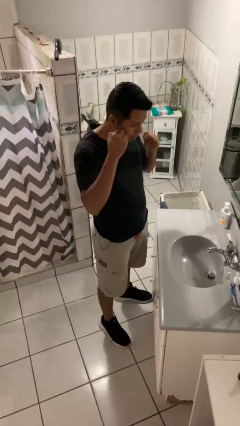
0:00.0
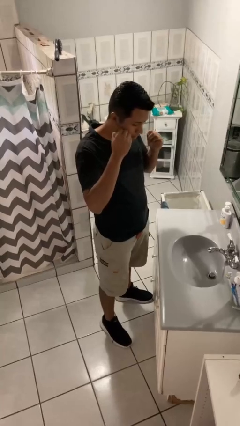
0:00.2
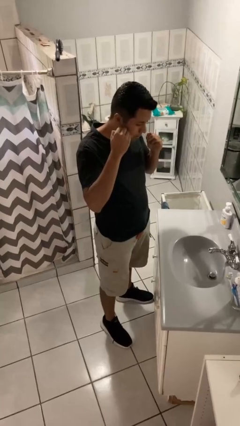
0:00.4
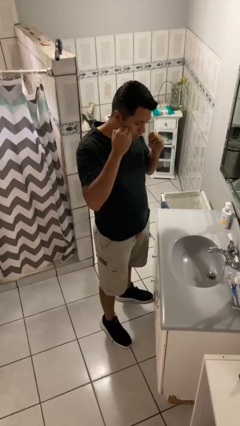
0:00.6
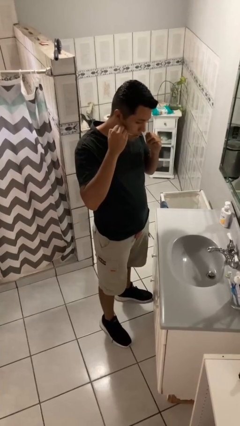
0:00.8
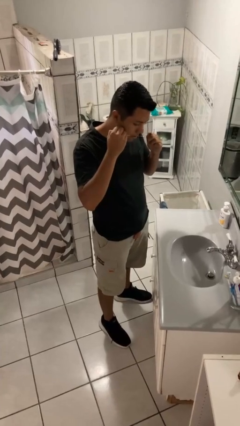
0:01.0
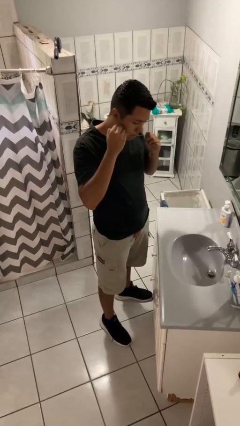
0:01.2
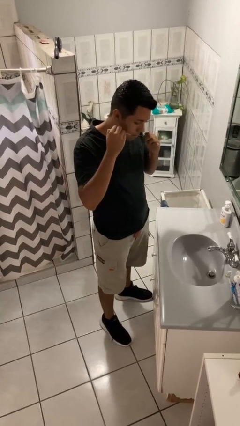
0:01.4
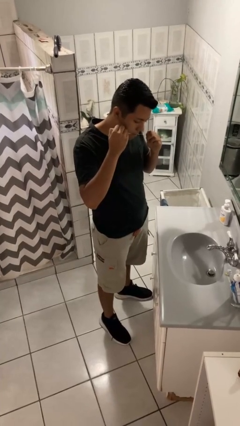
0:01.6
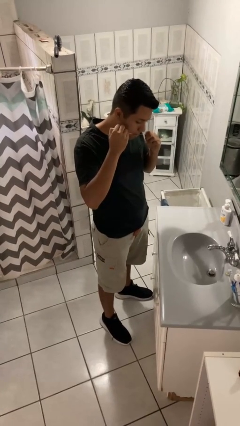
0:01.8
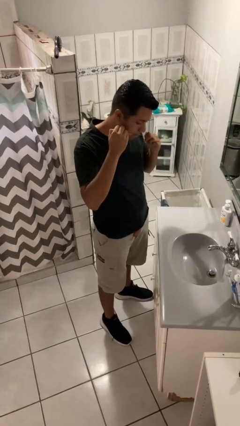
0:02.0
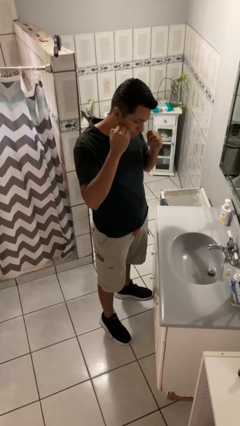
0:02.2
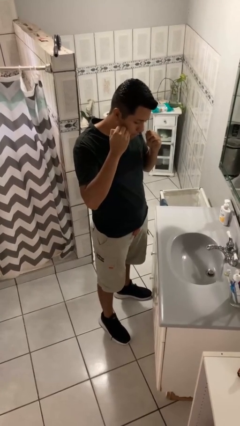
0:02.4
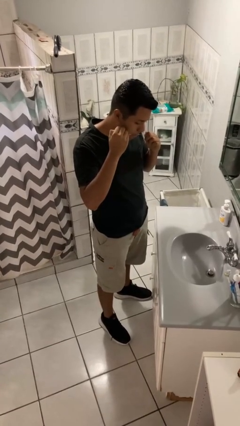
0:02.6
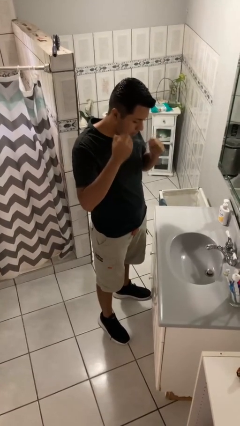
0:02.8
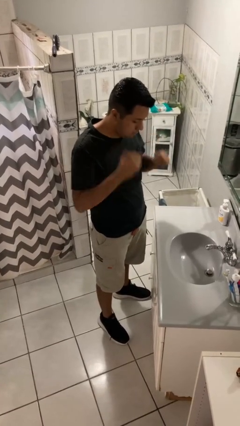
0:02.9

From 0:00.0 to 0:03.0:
person flosses

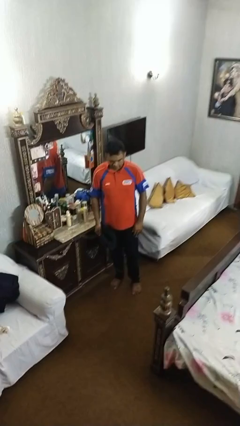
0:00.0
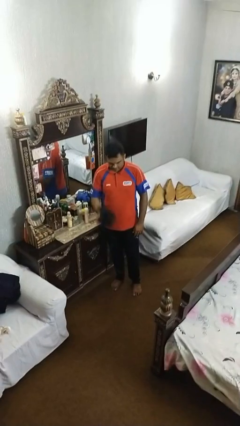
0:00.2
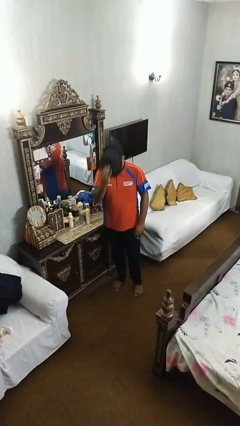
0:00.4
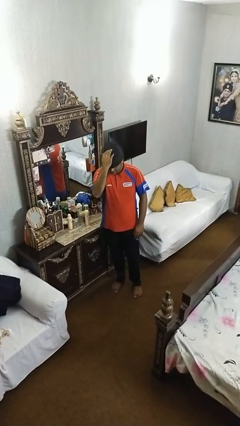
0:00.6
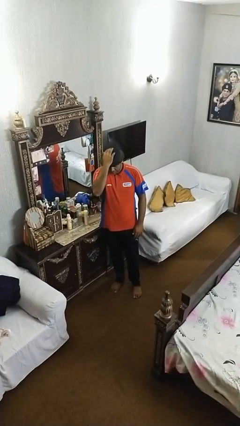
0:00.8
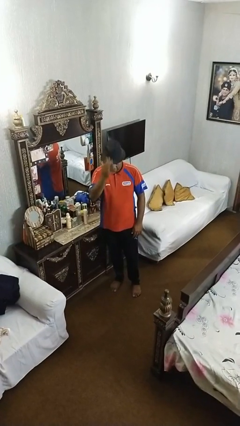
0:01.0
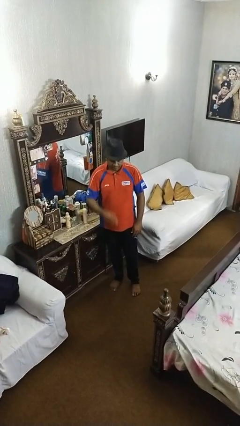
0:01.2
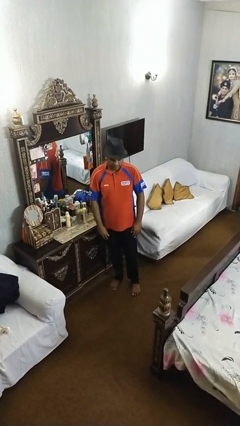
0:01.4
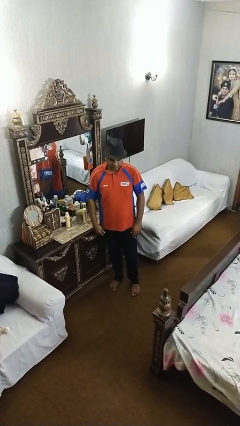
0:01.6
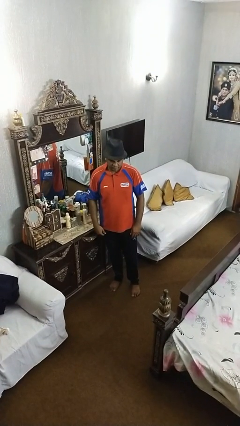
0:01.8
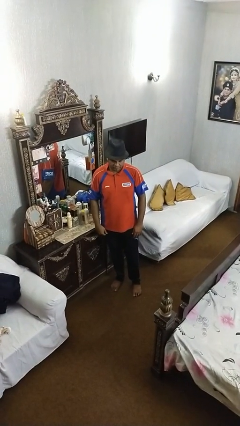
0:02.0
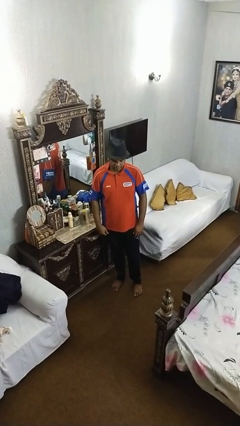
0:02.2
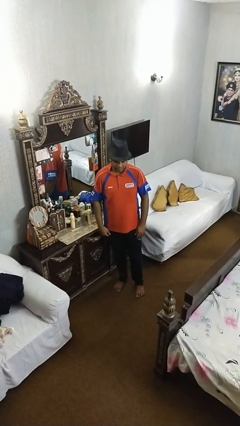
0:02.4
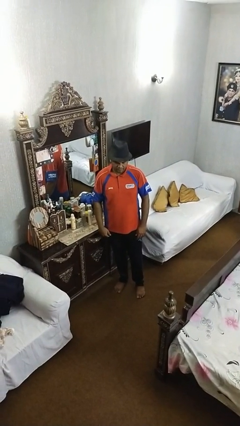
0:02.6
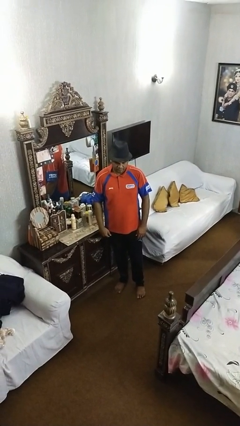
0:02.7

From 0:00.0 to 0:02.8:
person puts on hat

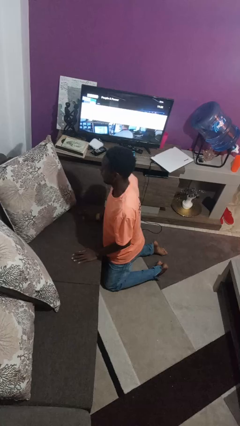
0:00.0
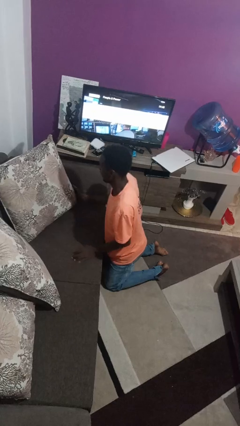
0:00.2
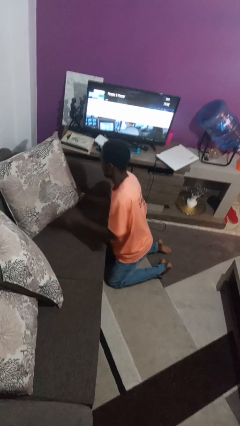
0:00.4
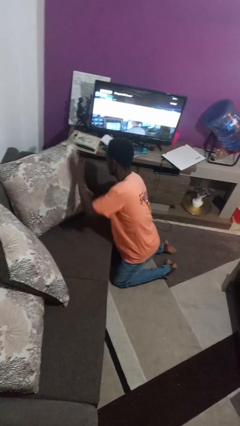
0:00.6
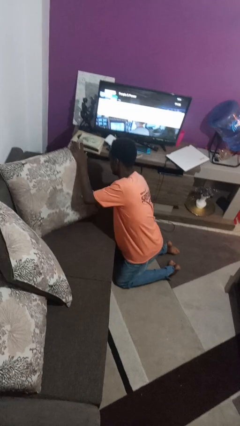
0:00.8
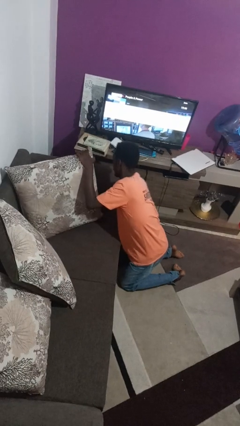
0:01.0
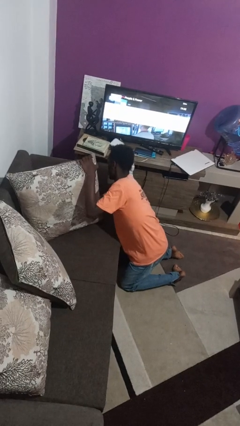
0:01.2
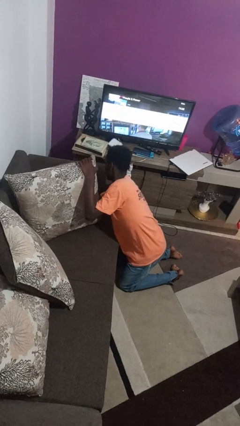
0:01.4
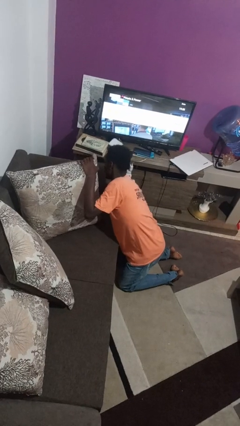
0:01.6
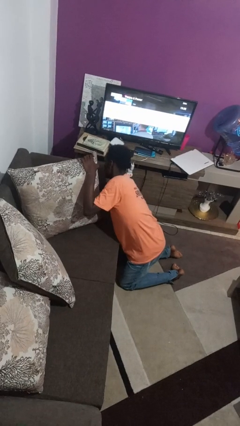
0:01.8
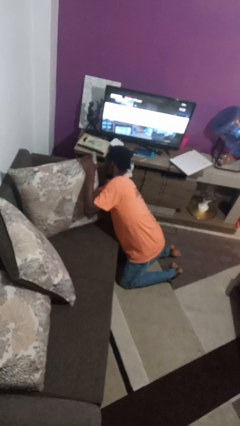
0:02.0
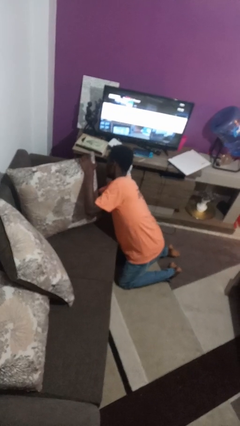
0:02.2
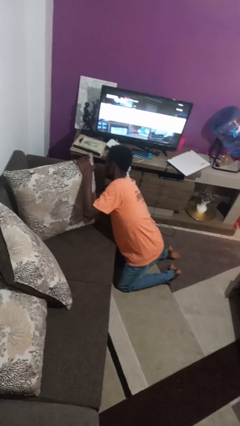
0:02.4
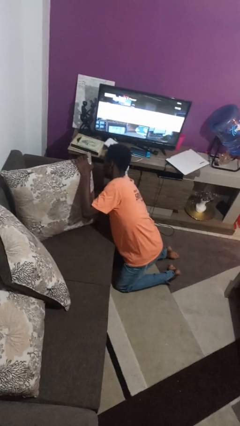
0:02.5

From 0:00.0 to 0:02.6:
person searches in couch

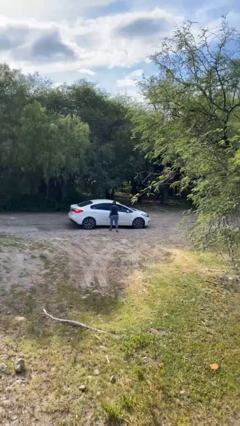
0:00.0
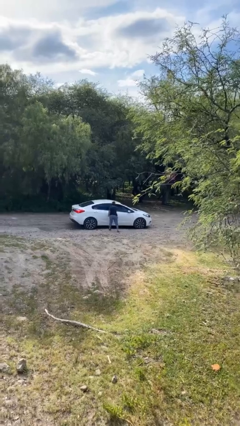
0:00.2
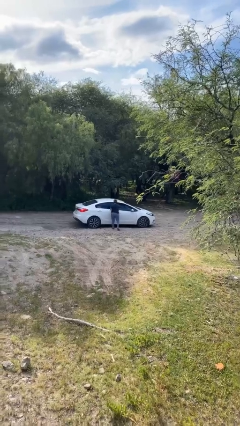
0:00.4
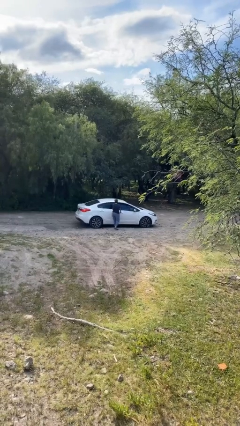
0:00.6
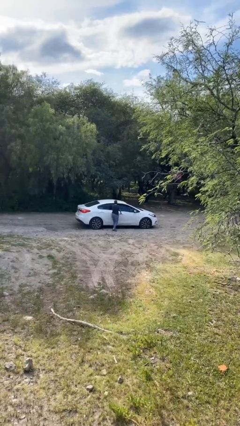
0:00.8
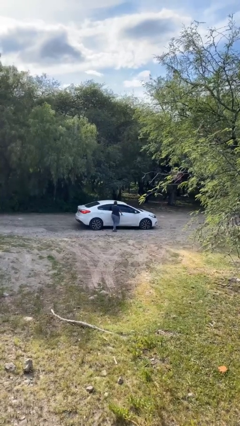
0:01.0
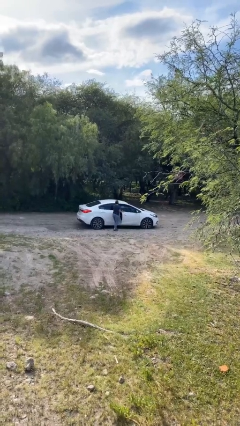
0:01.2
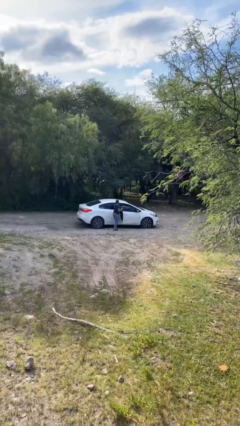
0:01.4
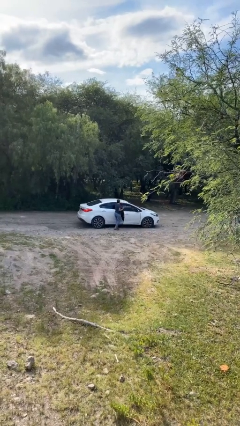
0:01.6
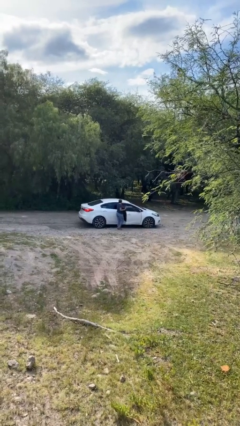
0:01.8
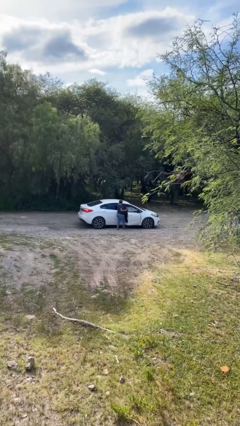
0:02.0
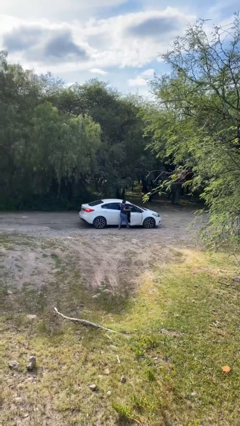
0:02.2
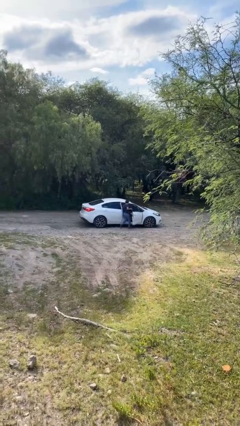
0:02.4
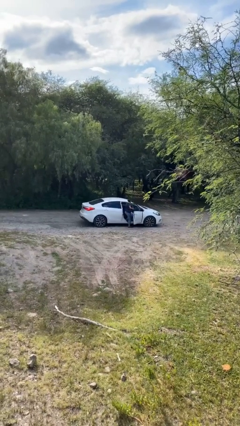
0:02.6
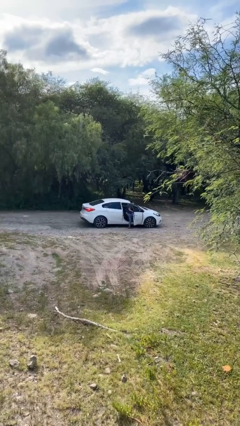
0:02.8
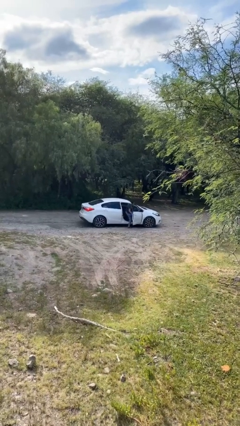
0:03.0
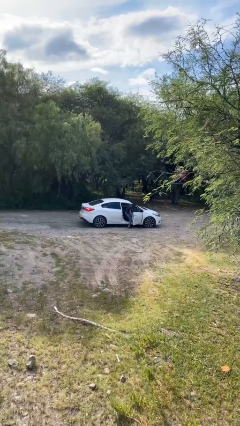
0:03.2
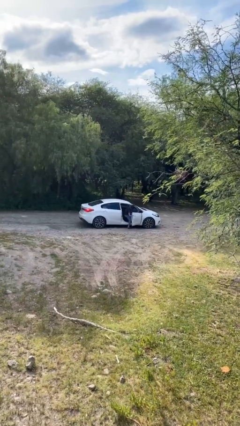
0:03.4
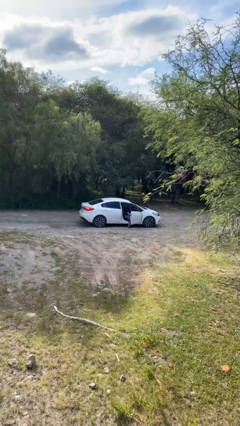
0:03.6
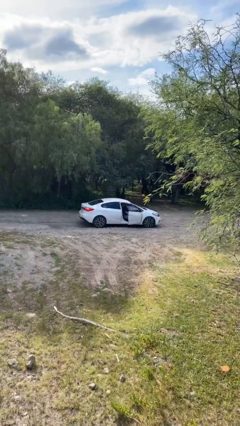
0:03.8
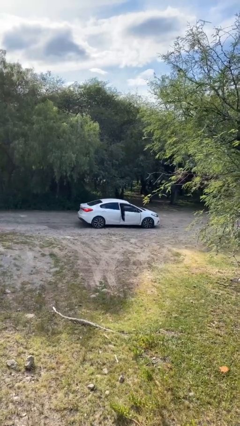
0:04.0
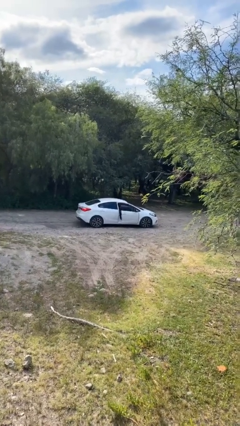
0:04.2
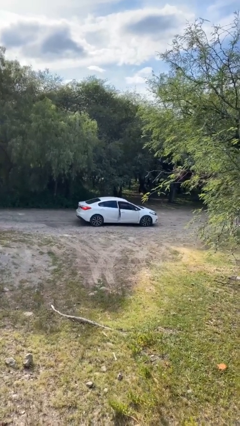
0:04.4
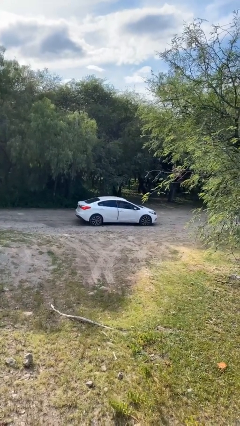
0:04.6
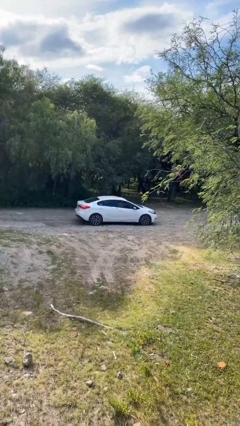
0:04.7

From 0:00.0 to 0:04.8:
car picks up person

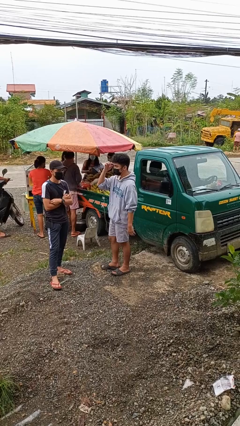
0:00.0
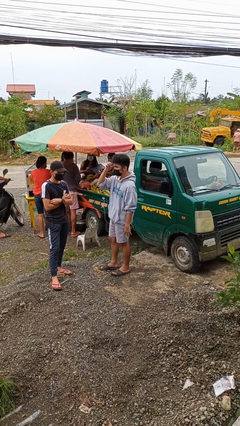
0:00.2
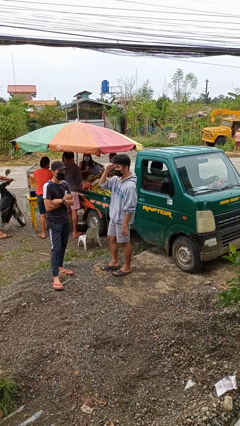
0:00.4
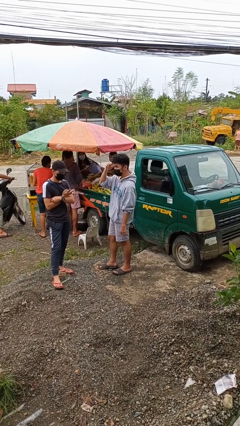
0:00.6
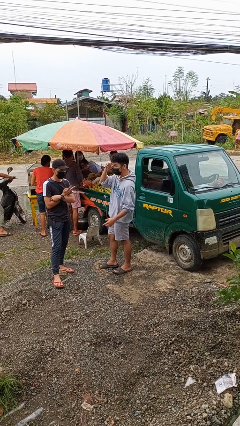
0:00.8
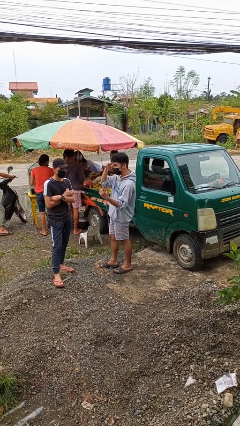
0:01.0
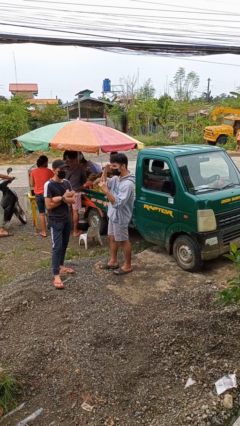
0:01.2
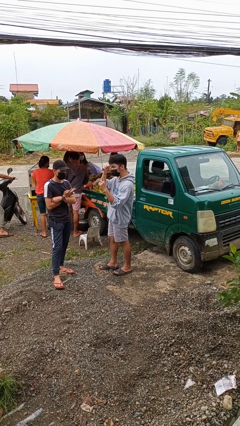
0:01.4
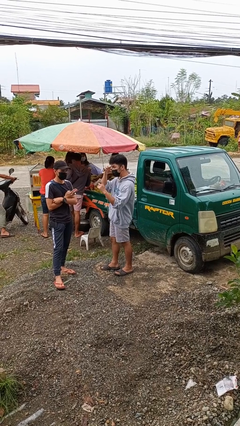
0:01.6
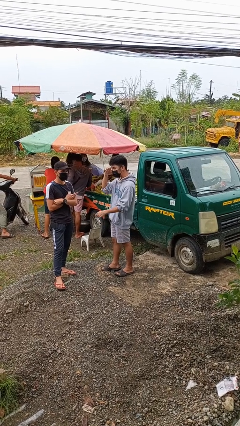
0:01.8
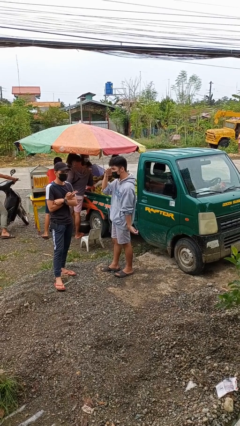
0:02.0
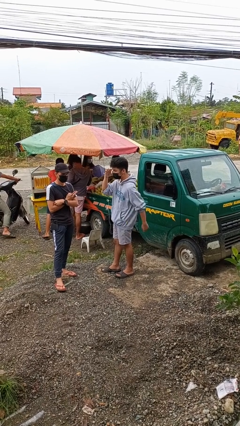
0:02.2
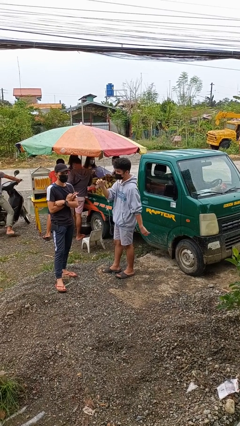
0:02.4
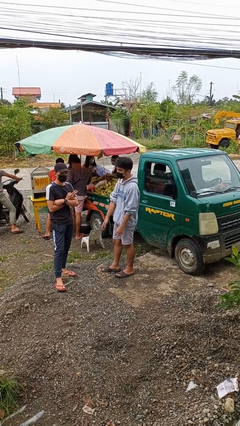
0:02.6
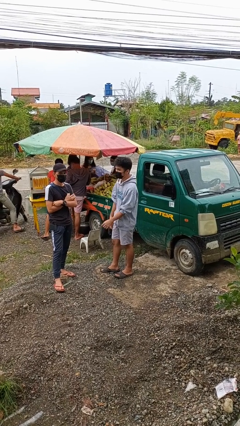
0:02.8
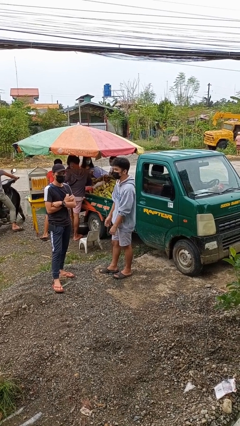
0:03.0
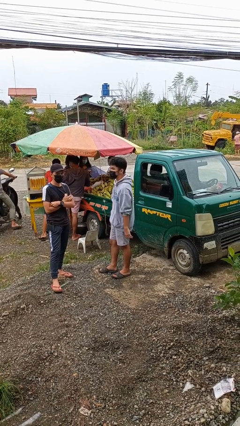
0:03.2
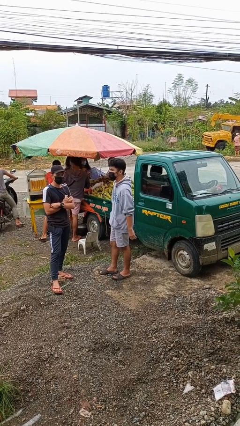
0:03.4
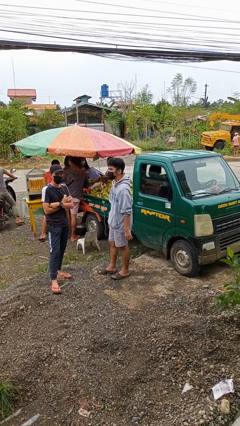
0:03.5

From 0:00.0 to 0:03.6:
person talks to person

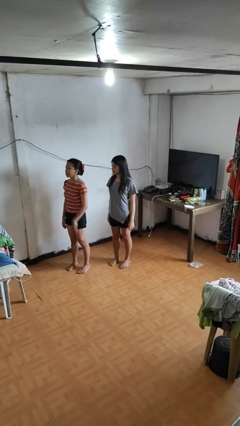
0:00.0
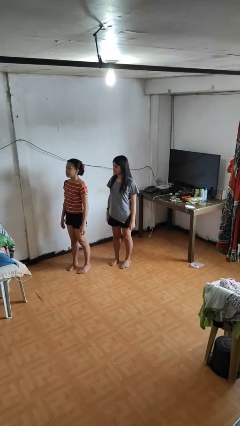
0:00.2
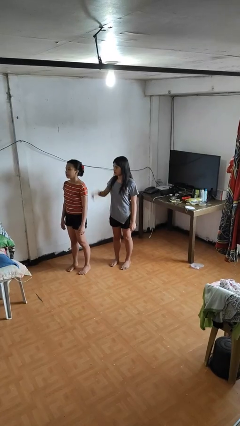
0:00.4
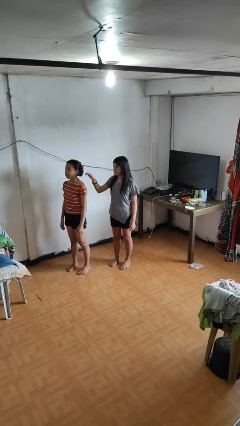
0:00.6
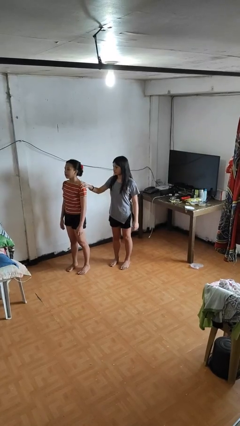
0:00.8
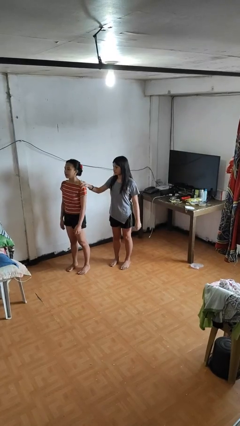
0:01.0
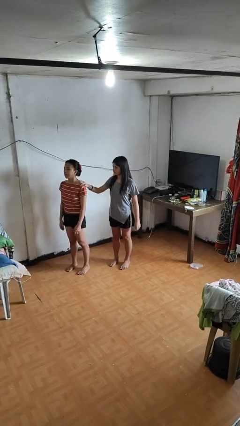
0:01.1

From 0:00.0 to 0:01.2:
person grabs person by shoulder
